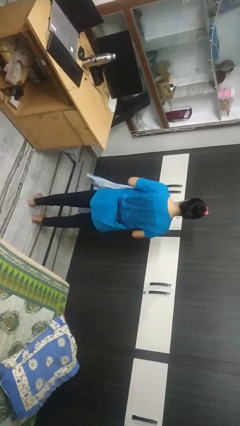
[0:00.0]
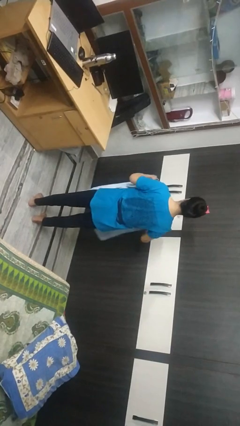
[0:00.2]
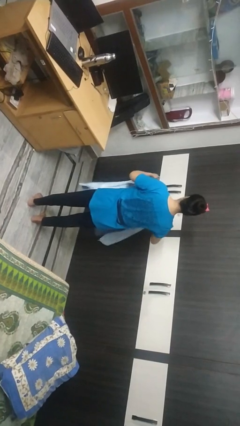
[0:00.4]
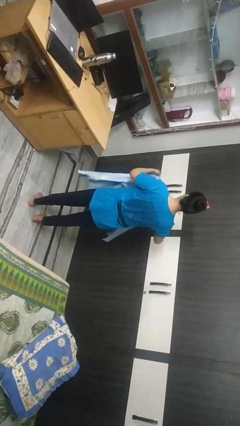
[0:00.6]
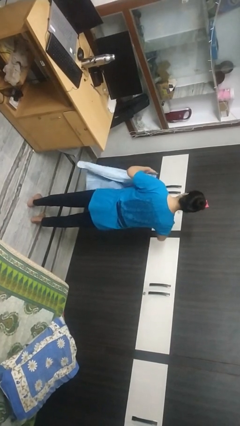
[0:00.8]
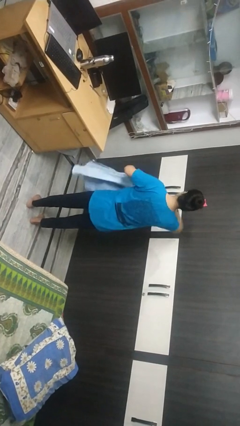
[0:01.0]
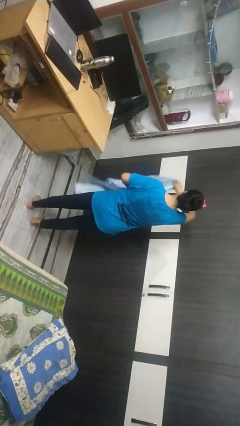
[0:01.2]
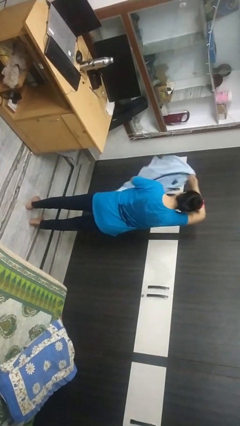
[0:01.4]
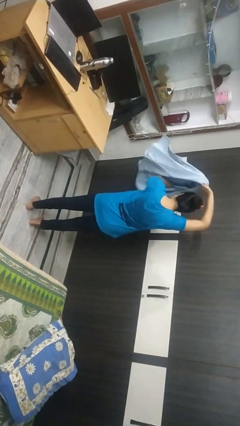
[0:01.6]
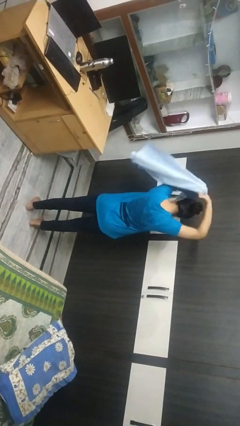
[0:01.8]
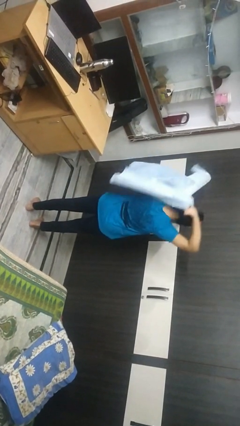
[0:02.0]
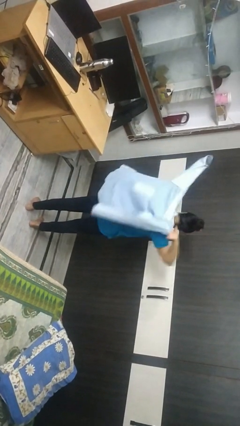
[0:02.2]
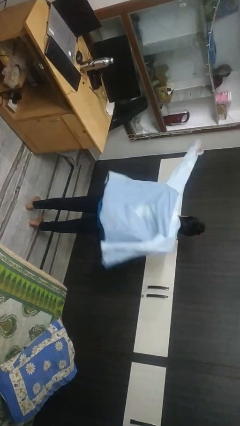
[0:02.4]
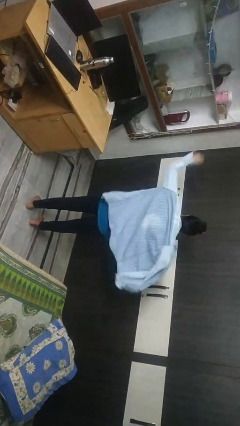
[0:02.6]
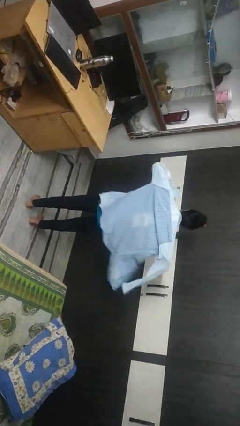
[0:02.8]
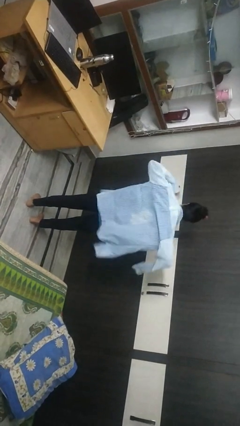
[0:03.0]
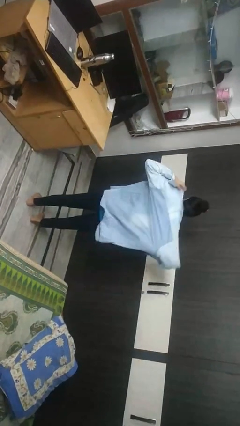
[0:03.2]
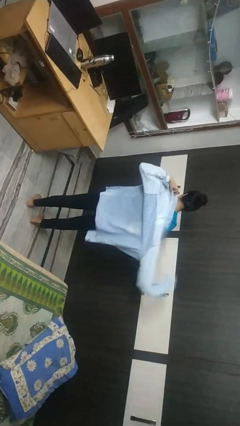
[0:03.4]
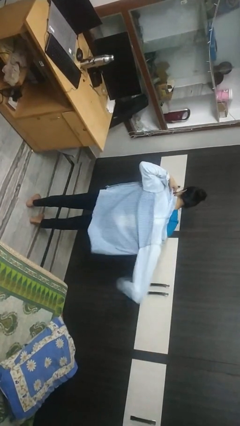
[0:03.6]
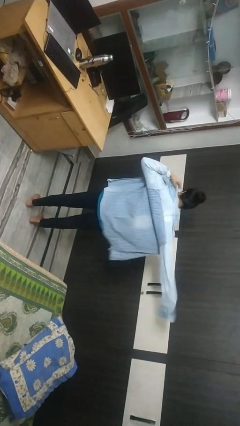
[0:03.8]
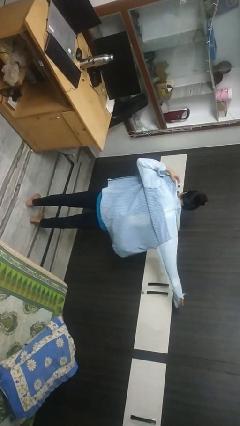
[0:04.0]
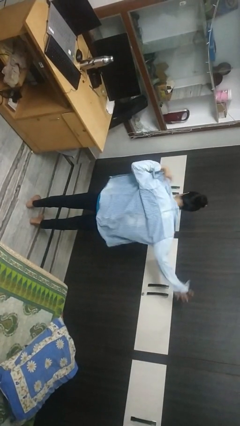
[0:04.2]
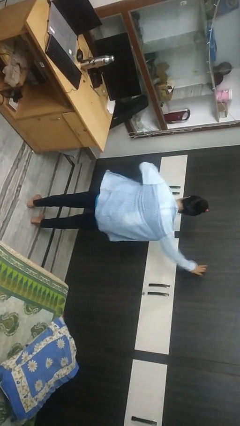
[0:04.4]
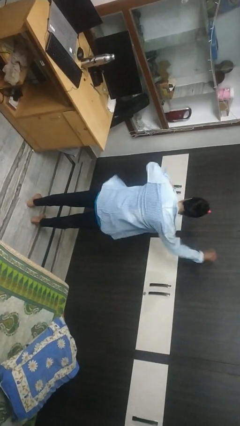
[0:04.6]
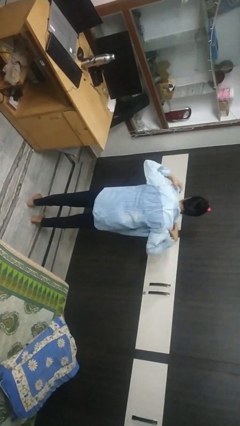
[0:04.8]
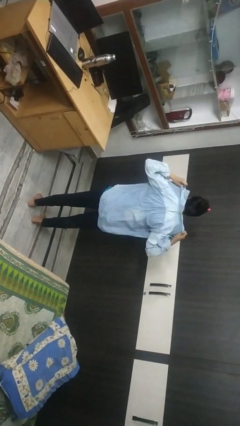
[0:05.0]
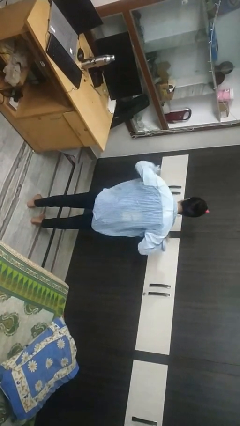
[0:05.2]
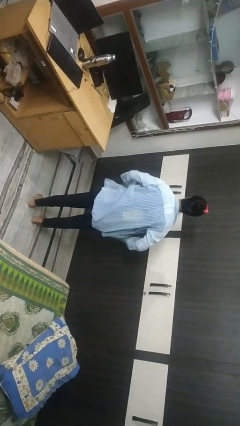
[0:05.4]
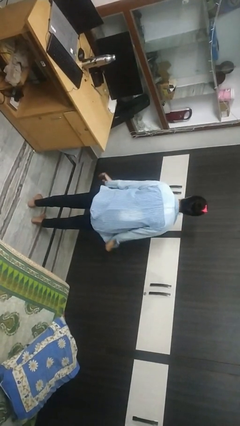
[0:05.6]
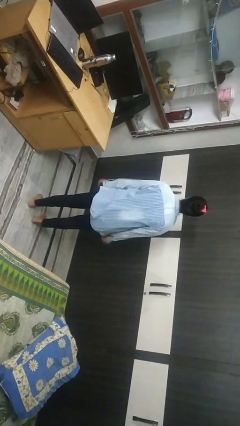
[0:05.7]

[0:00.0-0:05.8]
person puts on shirt

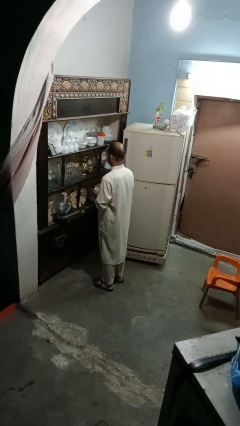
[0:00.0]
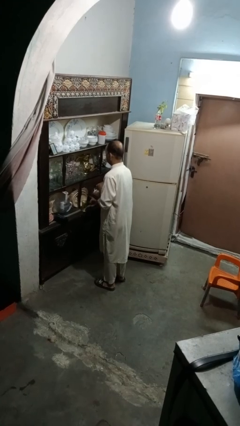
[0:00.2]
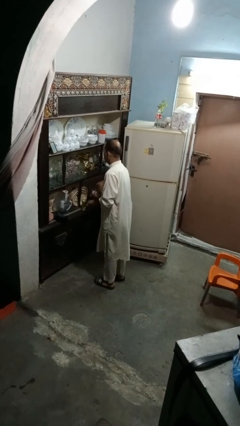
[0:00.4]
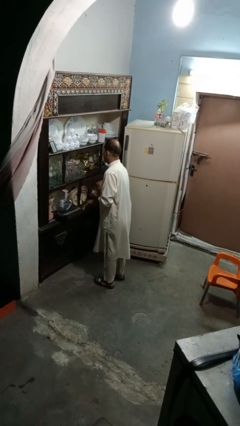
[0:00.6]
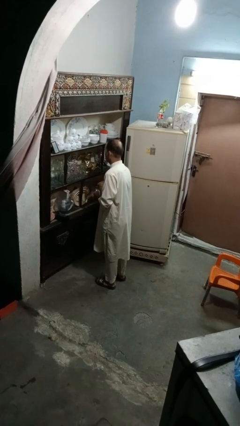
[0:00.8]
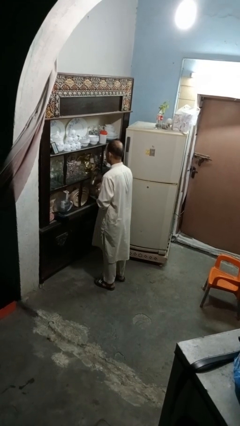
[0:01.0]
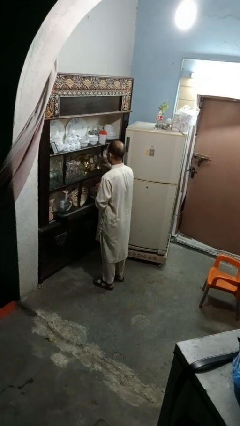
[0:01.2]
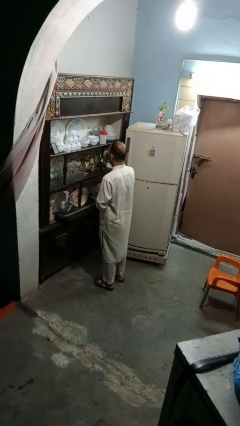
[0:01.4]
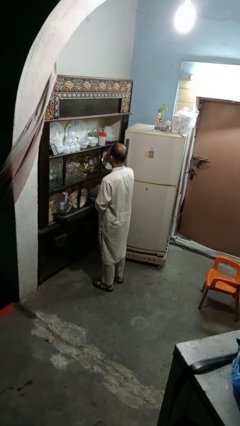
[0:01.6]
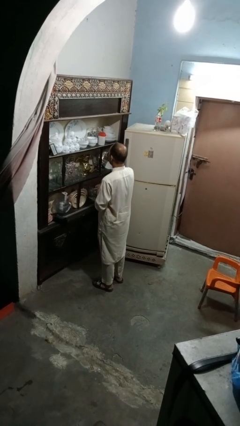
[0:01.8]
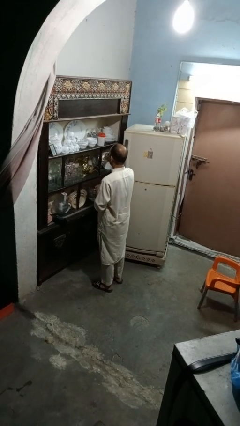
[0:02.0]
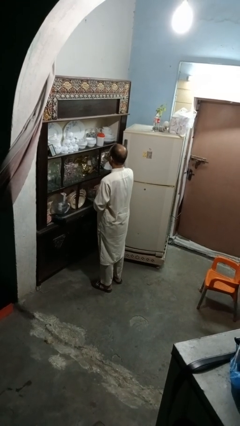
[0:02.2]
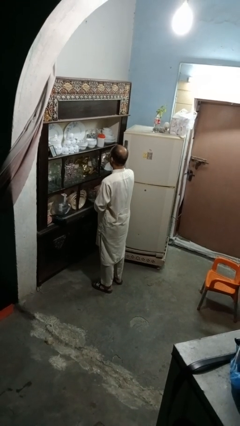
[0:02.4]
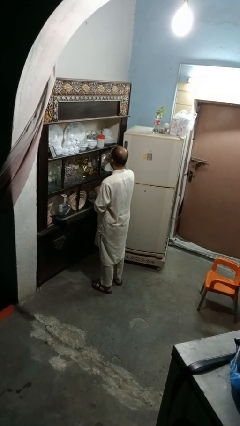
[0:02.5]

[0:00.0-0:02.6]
person drinks from cup

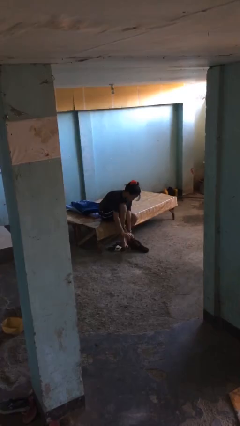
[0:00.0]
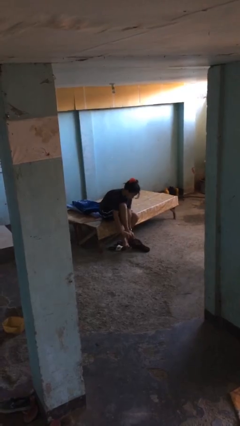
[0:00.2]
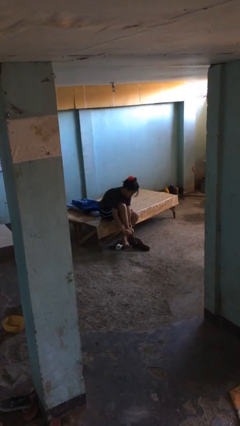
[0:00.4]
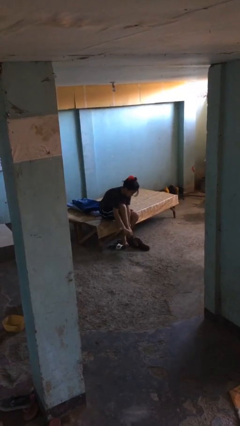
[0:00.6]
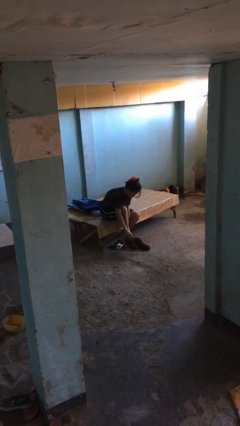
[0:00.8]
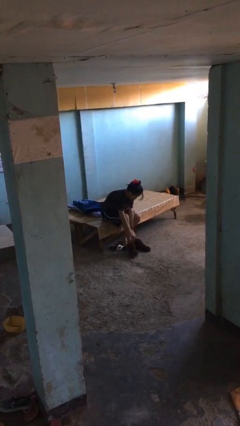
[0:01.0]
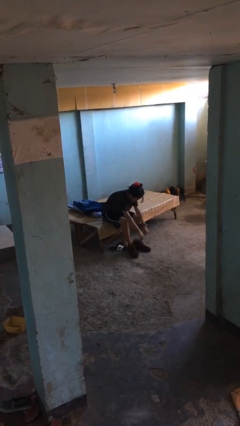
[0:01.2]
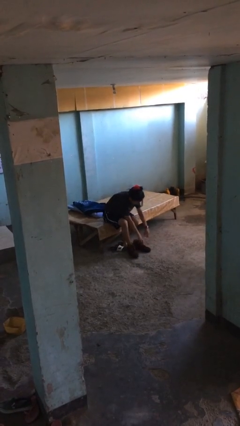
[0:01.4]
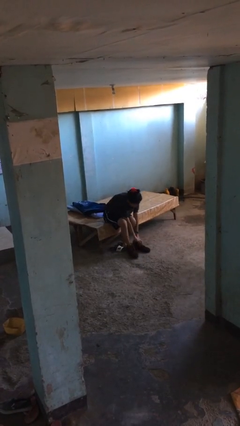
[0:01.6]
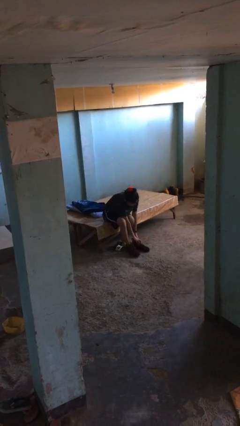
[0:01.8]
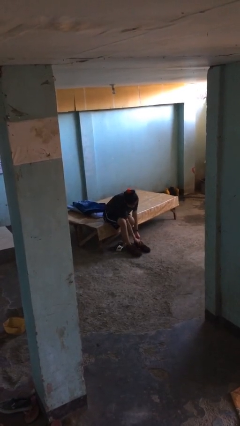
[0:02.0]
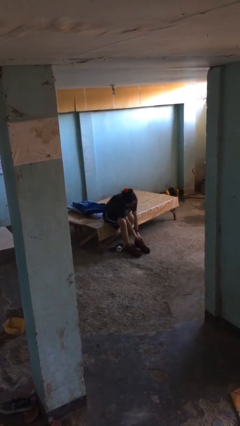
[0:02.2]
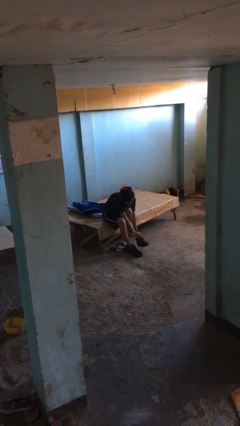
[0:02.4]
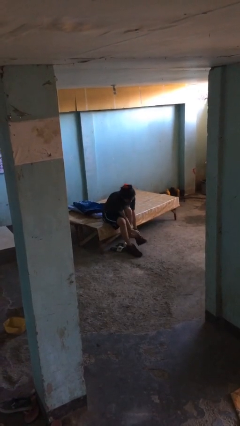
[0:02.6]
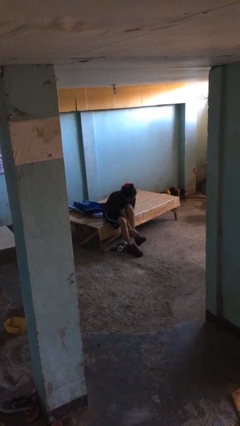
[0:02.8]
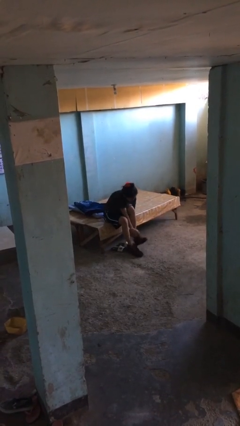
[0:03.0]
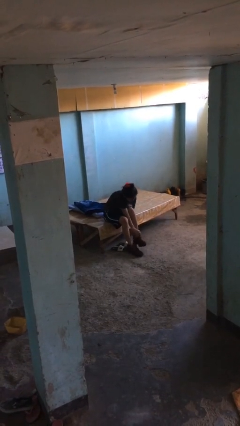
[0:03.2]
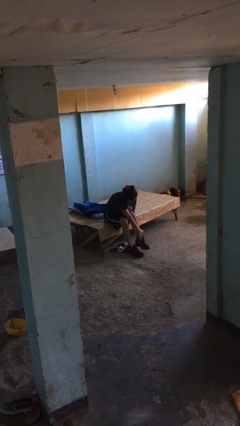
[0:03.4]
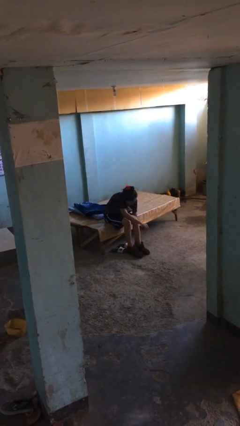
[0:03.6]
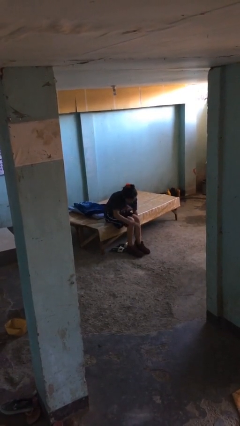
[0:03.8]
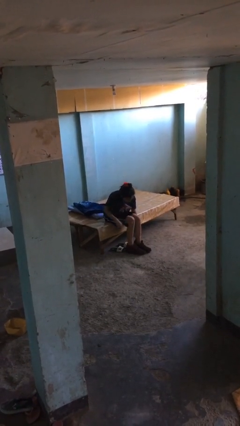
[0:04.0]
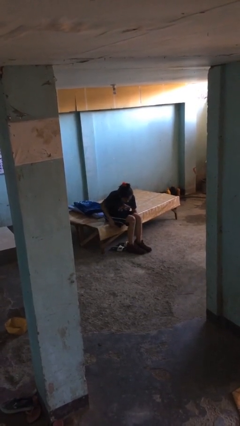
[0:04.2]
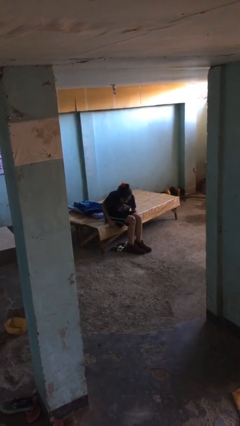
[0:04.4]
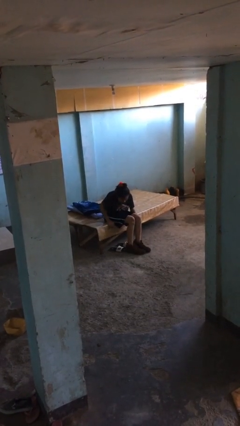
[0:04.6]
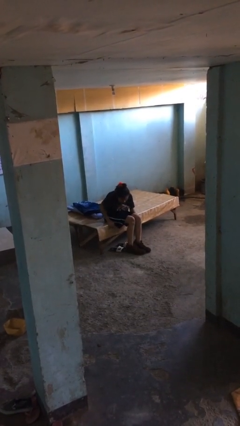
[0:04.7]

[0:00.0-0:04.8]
person puts on boots

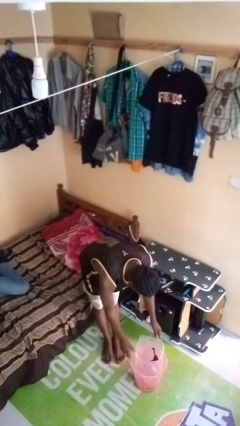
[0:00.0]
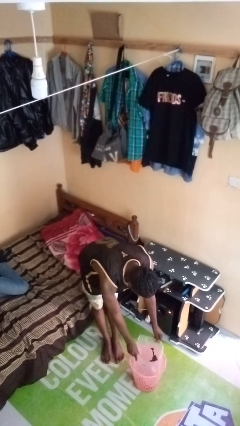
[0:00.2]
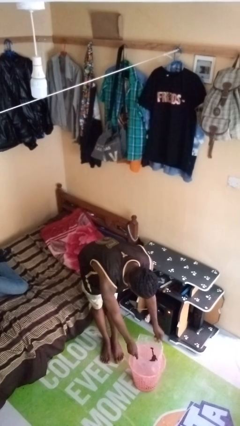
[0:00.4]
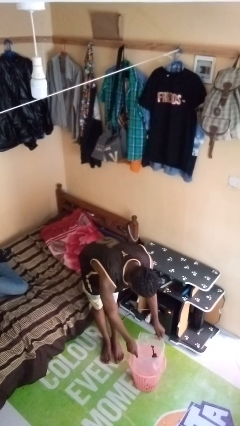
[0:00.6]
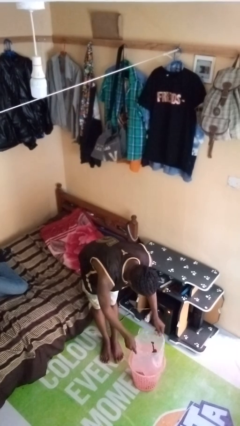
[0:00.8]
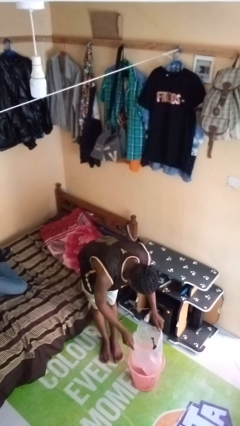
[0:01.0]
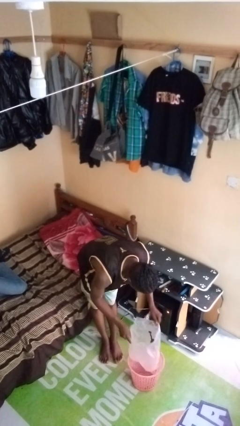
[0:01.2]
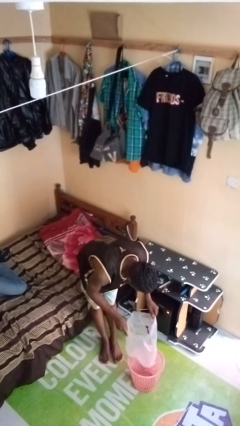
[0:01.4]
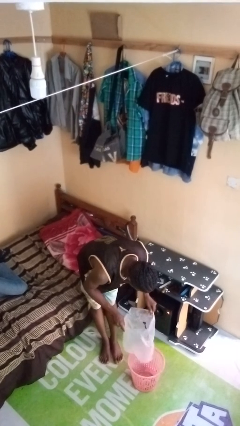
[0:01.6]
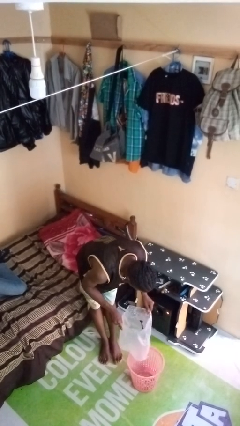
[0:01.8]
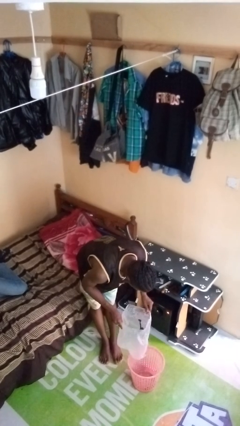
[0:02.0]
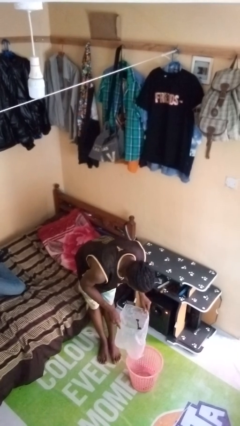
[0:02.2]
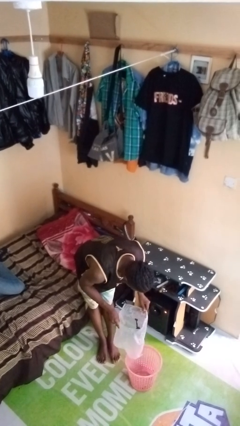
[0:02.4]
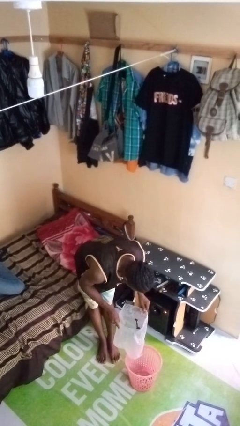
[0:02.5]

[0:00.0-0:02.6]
person removes trashbag from trashcan

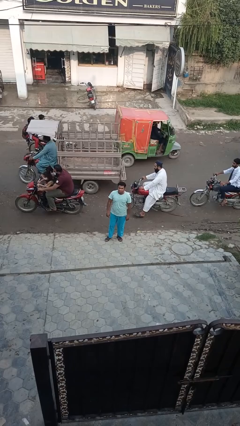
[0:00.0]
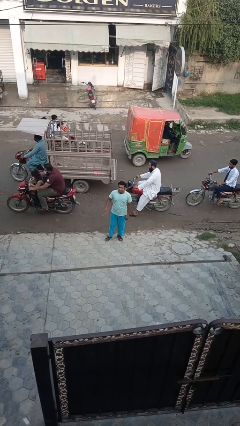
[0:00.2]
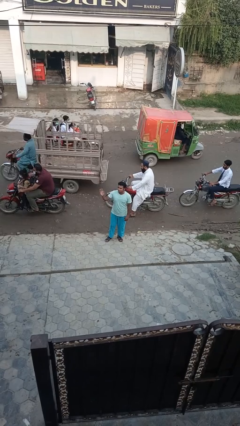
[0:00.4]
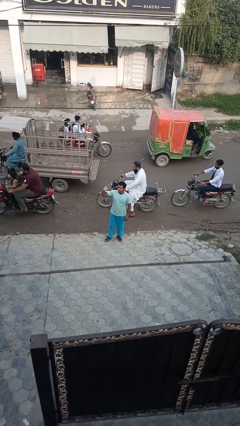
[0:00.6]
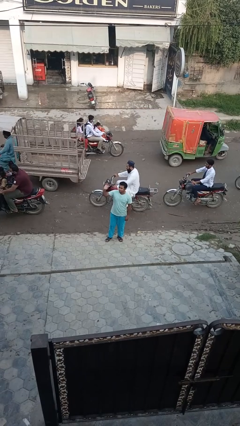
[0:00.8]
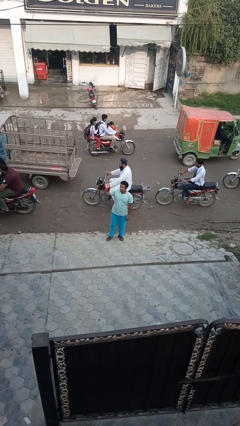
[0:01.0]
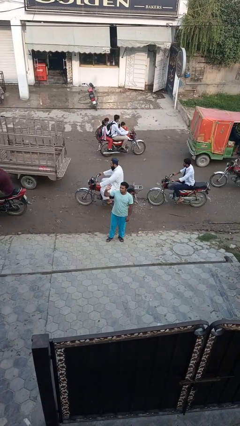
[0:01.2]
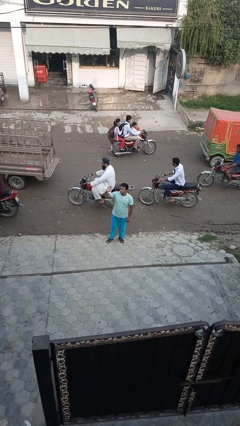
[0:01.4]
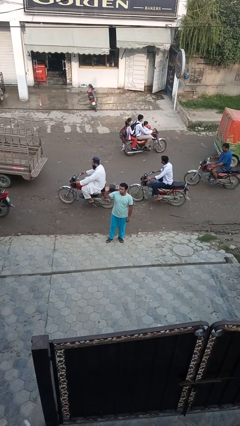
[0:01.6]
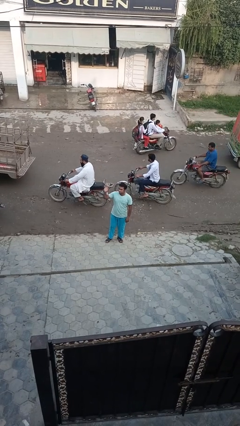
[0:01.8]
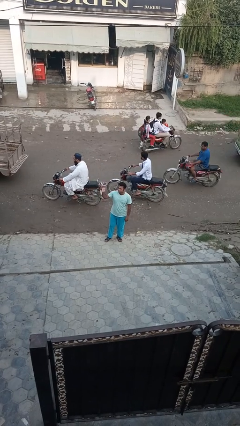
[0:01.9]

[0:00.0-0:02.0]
person waves at person
